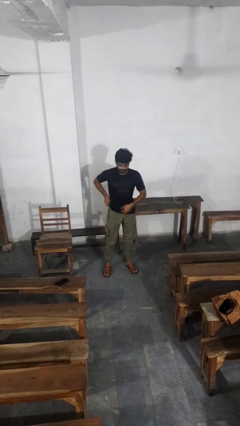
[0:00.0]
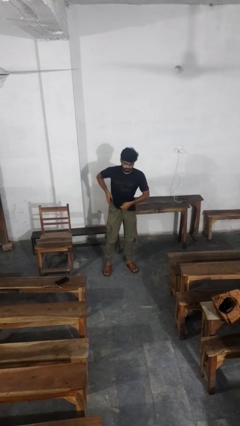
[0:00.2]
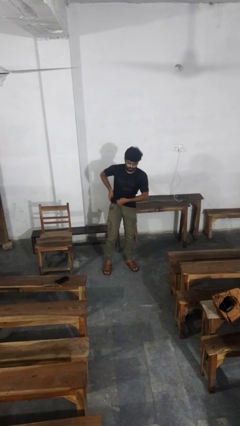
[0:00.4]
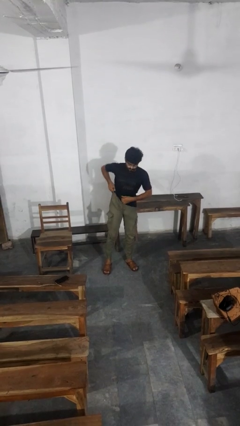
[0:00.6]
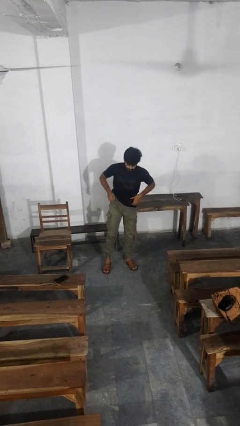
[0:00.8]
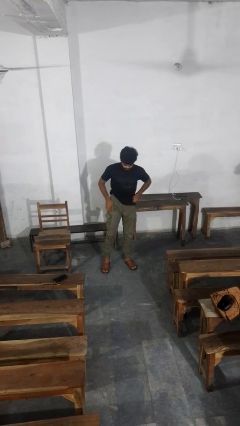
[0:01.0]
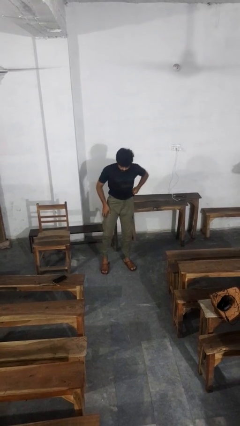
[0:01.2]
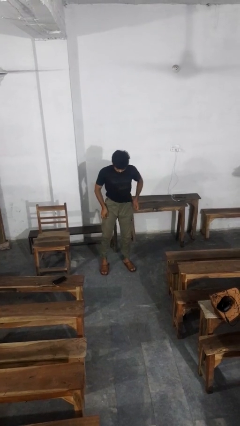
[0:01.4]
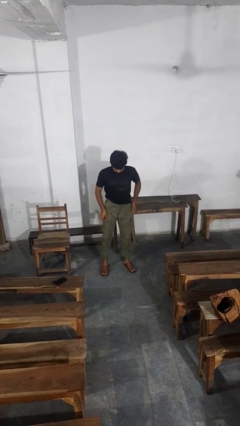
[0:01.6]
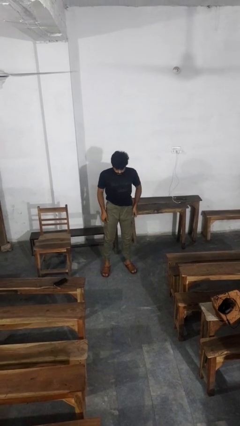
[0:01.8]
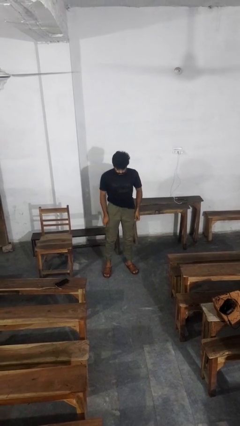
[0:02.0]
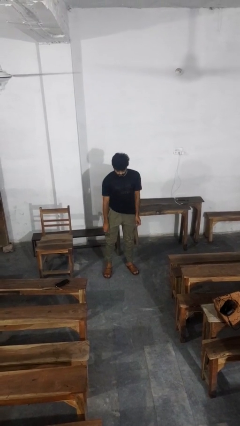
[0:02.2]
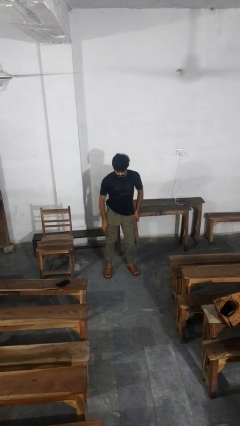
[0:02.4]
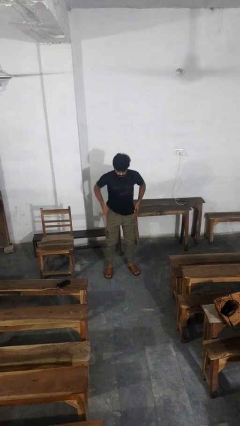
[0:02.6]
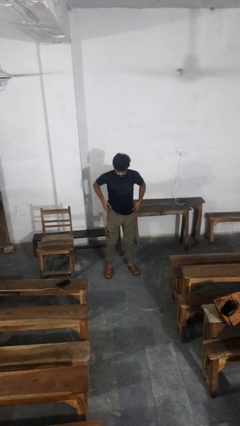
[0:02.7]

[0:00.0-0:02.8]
person hikes up pants

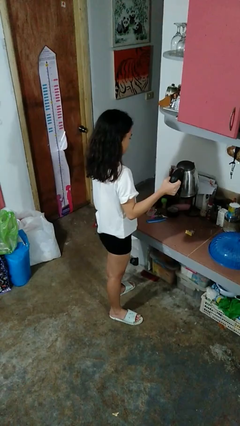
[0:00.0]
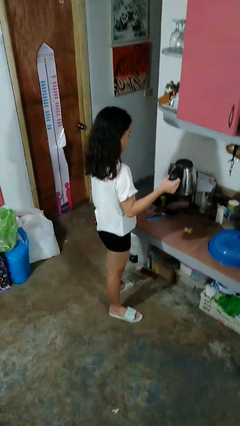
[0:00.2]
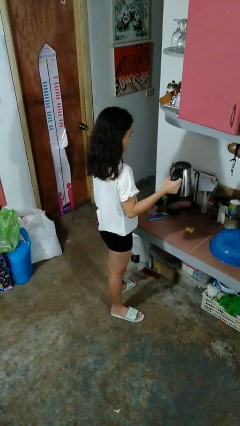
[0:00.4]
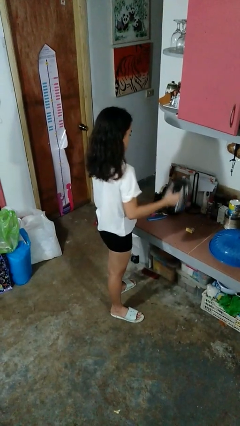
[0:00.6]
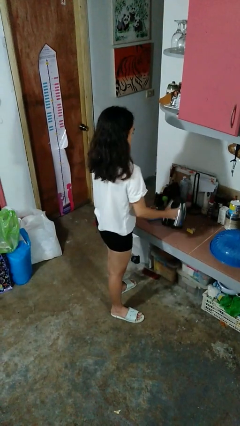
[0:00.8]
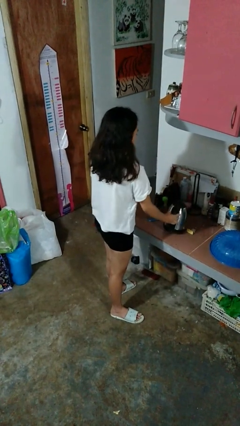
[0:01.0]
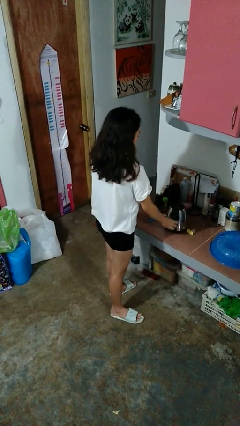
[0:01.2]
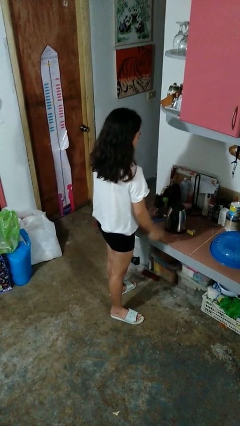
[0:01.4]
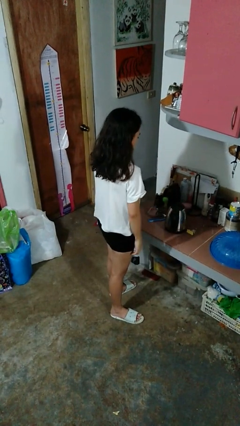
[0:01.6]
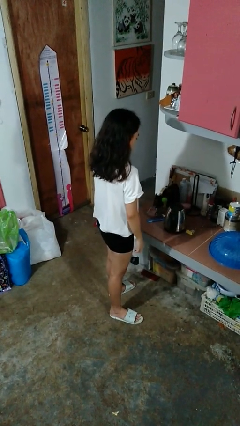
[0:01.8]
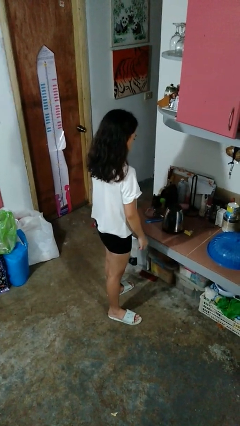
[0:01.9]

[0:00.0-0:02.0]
person puts down object on countertop

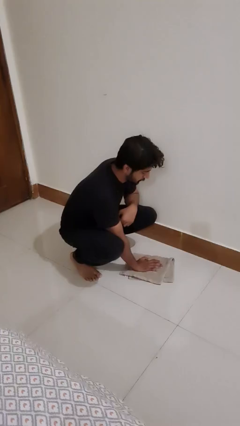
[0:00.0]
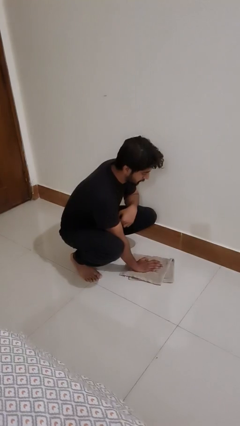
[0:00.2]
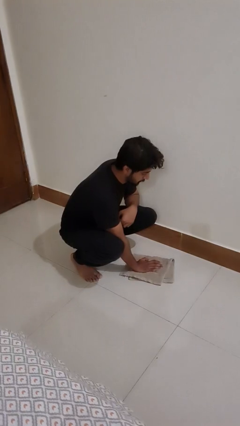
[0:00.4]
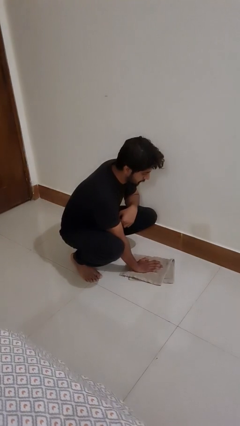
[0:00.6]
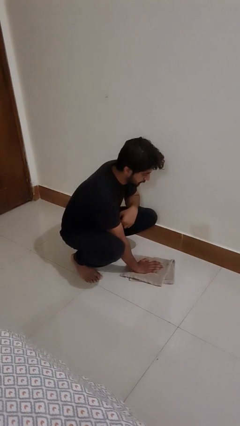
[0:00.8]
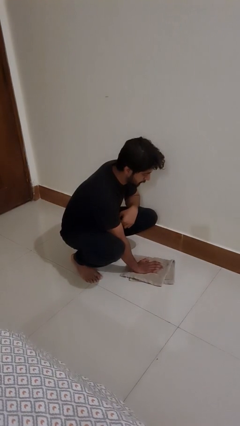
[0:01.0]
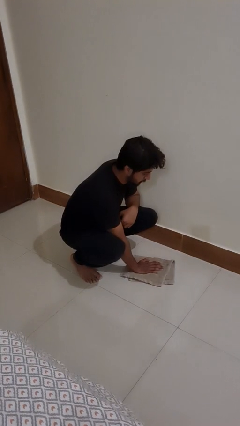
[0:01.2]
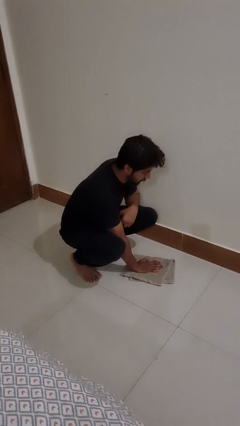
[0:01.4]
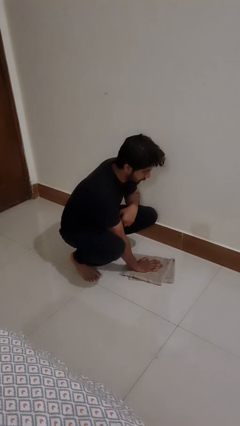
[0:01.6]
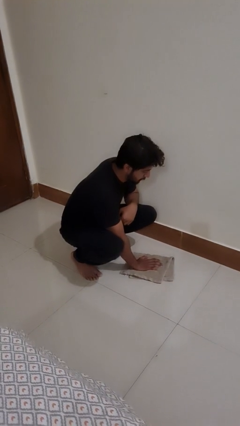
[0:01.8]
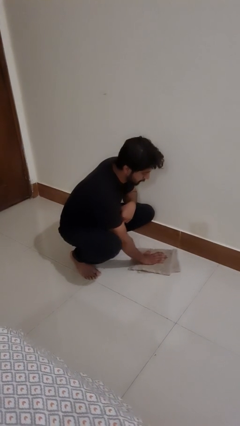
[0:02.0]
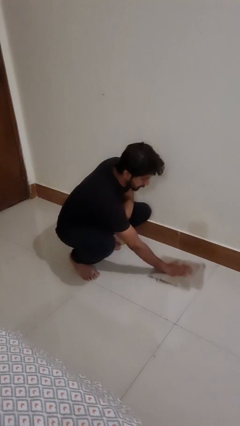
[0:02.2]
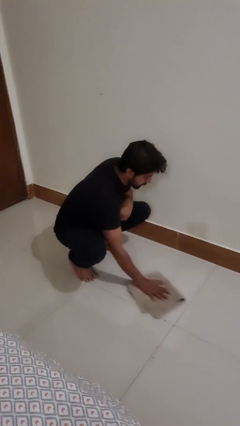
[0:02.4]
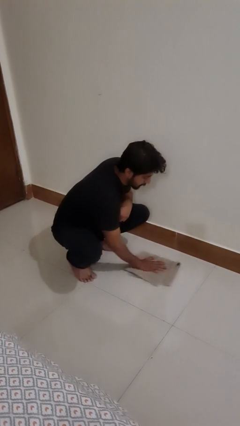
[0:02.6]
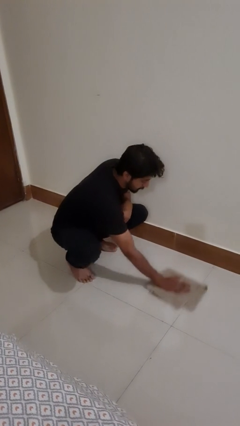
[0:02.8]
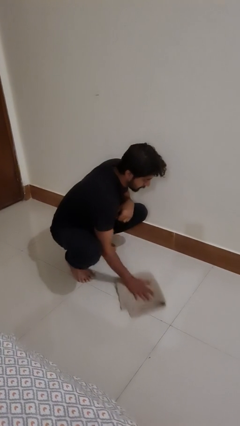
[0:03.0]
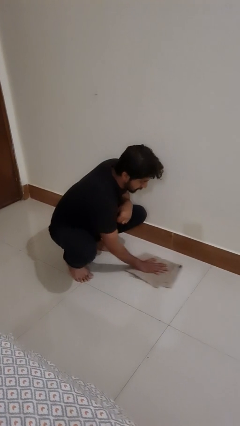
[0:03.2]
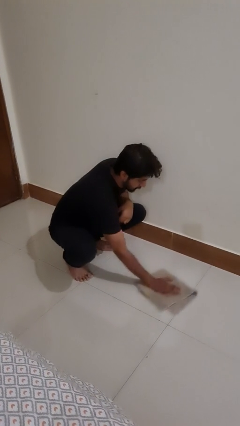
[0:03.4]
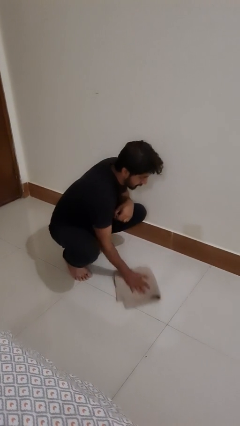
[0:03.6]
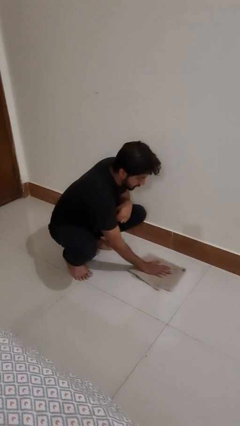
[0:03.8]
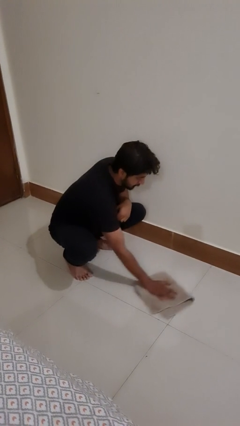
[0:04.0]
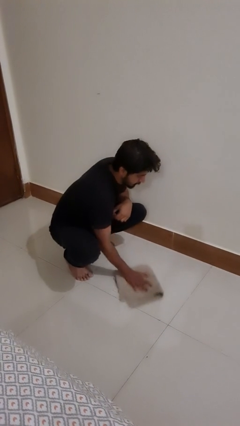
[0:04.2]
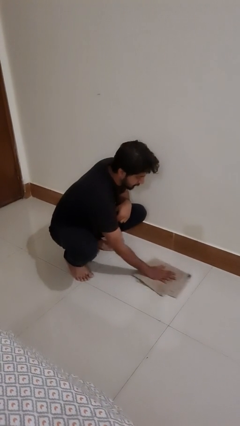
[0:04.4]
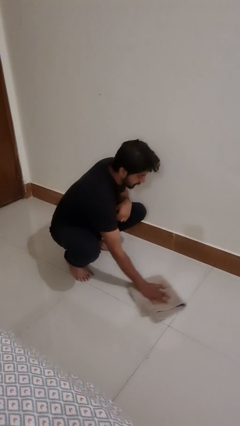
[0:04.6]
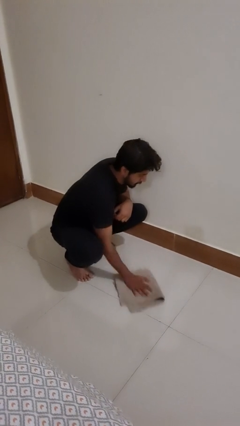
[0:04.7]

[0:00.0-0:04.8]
person mops

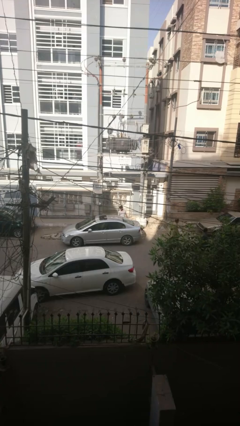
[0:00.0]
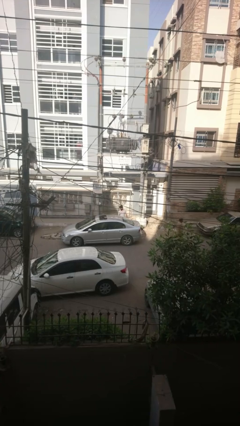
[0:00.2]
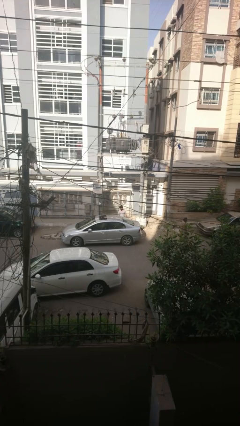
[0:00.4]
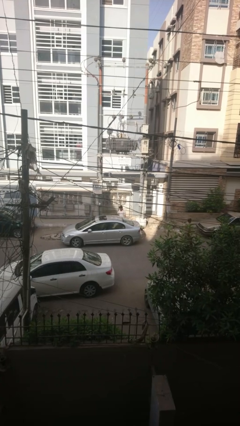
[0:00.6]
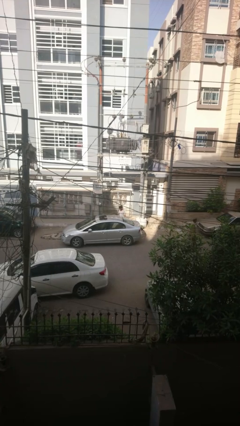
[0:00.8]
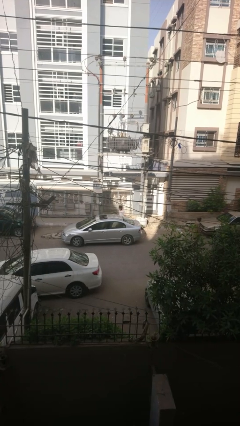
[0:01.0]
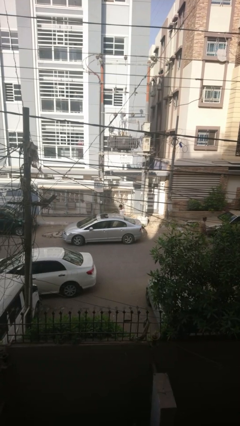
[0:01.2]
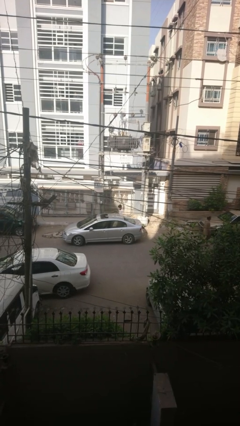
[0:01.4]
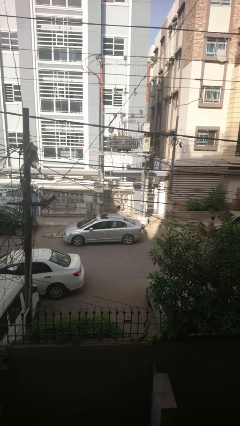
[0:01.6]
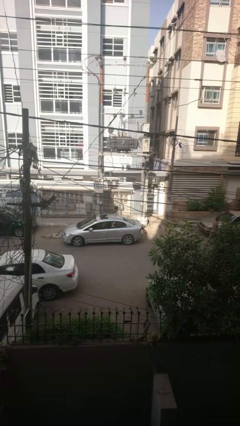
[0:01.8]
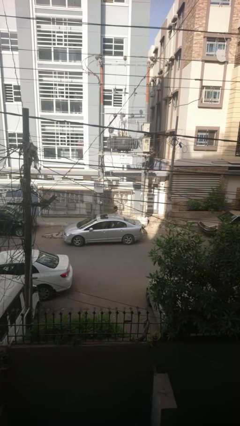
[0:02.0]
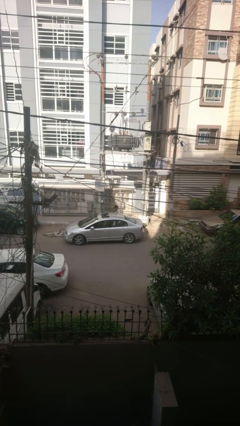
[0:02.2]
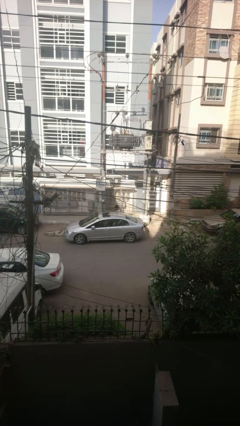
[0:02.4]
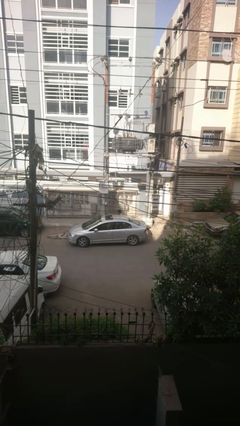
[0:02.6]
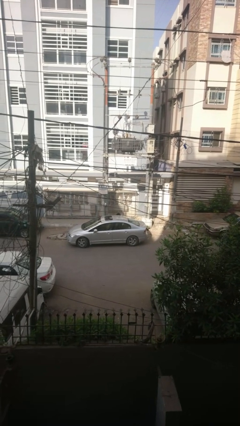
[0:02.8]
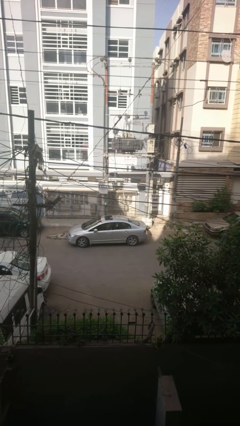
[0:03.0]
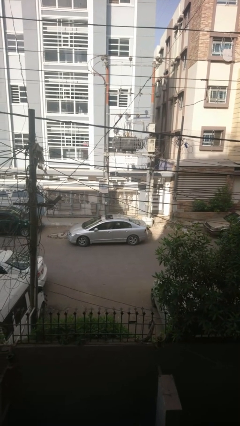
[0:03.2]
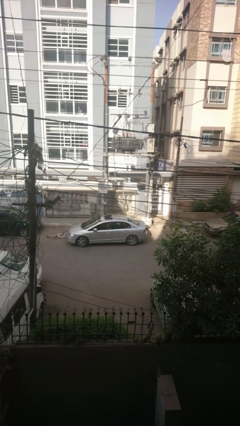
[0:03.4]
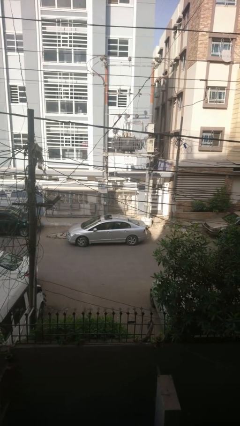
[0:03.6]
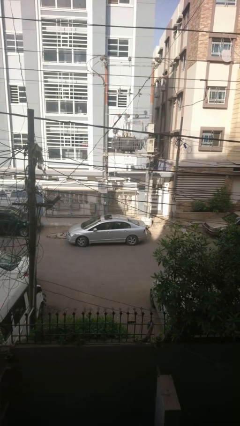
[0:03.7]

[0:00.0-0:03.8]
person enters car

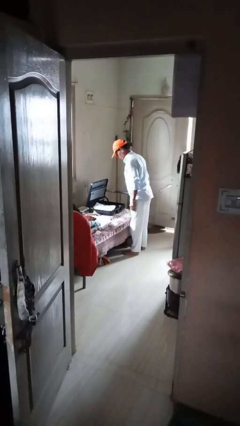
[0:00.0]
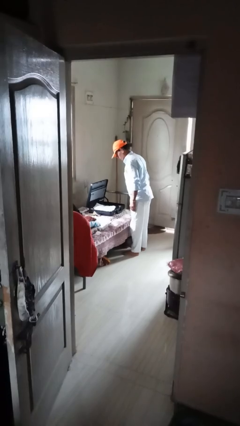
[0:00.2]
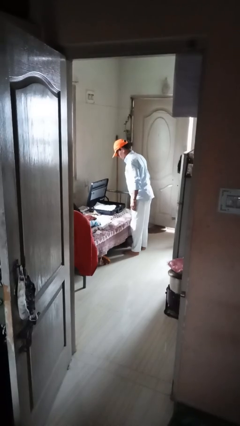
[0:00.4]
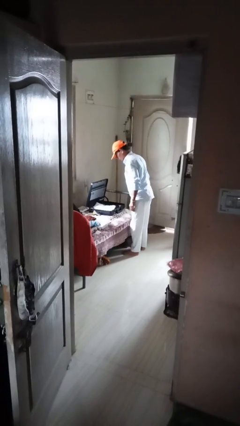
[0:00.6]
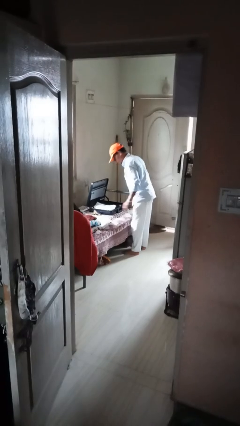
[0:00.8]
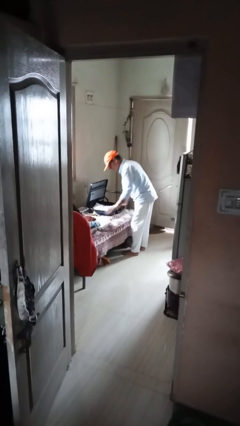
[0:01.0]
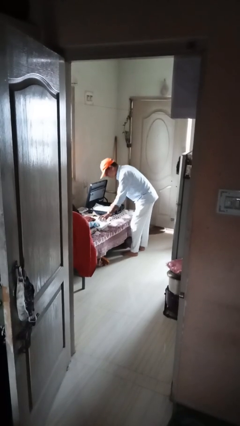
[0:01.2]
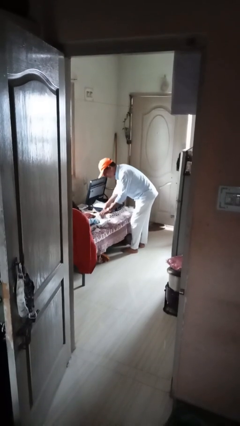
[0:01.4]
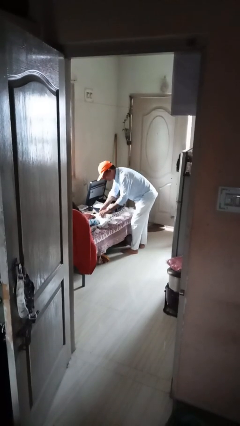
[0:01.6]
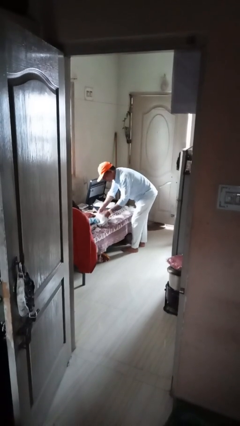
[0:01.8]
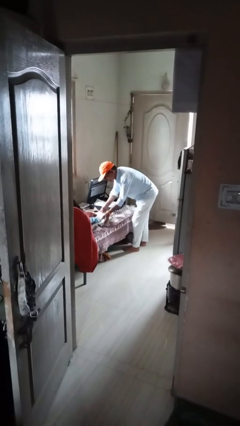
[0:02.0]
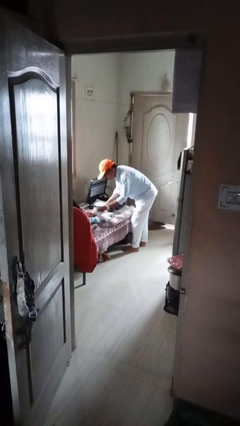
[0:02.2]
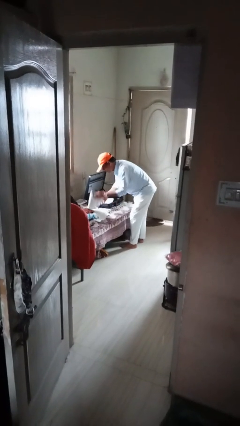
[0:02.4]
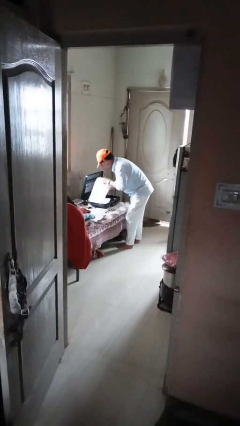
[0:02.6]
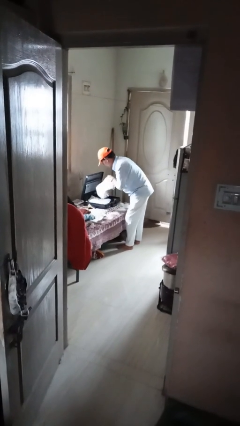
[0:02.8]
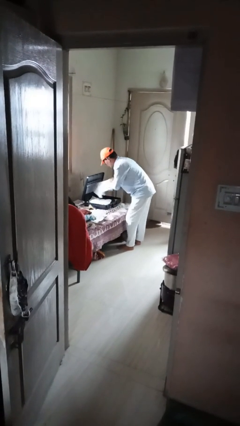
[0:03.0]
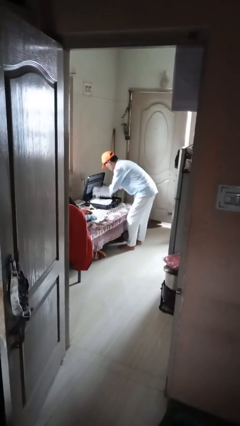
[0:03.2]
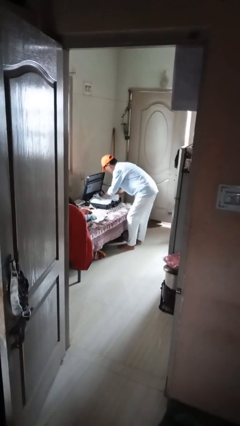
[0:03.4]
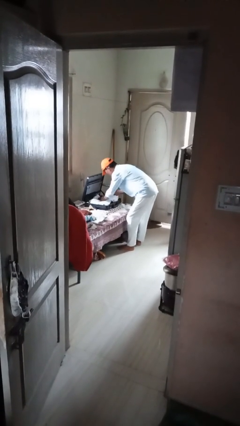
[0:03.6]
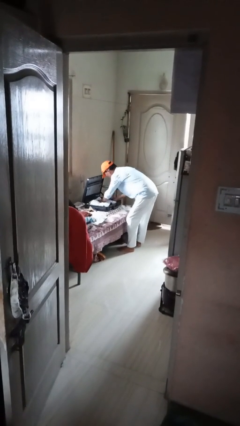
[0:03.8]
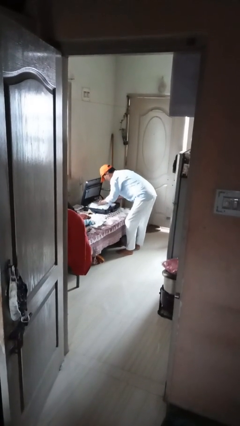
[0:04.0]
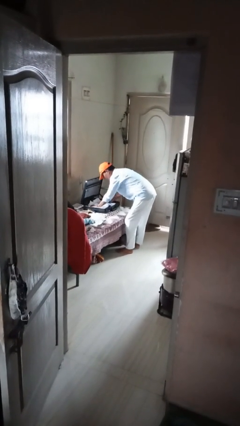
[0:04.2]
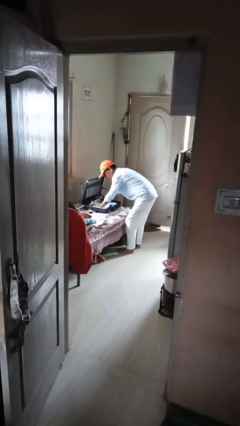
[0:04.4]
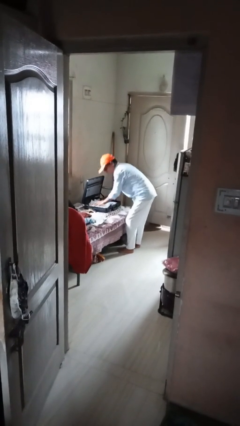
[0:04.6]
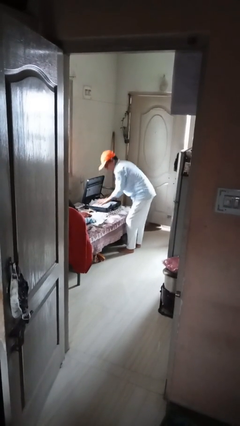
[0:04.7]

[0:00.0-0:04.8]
person loads clothes into suitcase
